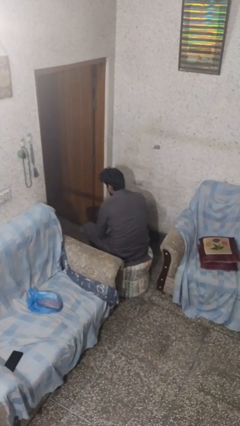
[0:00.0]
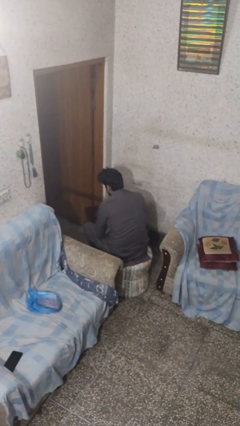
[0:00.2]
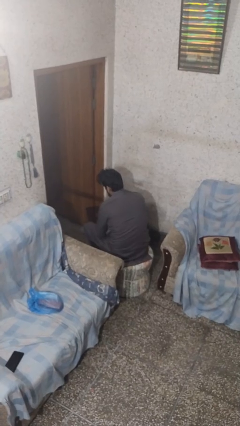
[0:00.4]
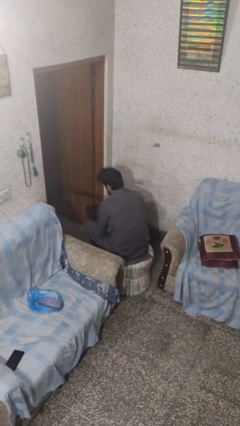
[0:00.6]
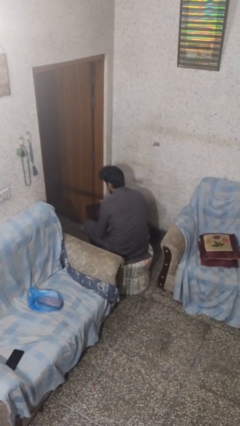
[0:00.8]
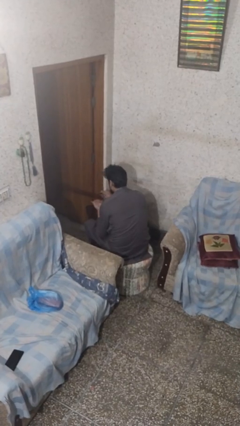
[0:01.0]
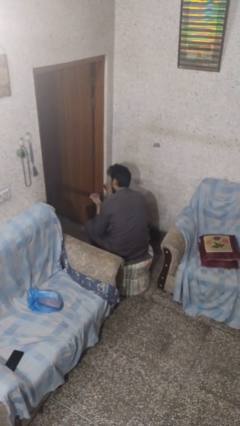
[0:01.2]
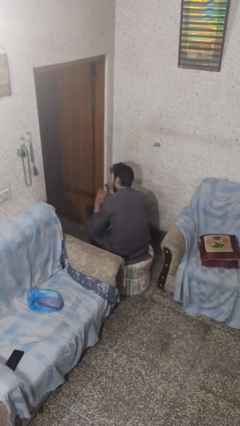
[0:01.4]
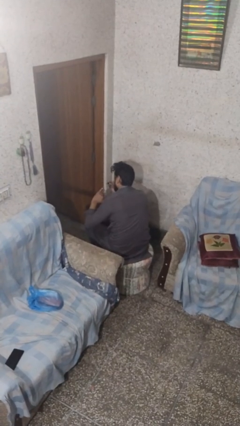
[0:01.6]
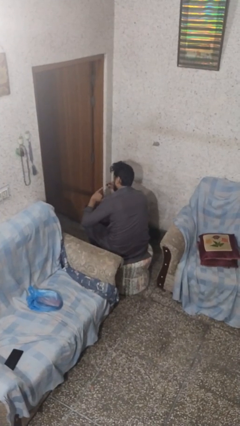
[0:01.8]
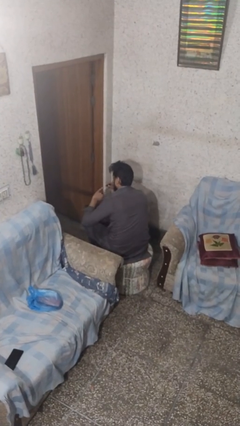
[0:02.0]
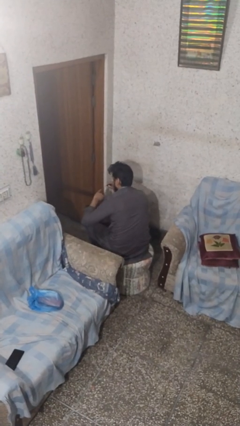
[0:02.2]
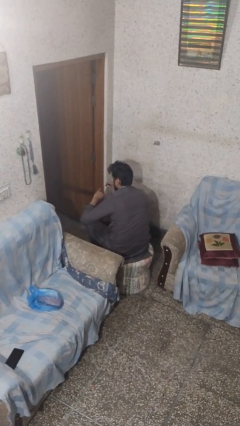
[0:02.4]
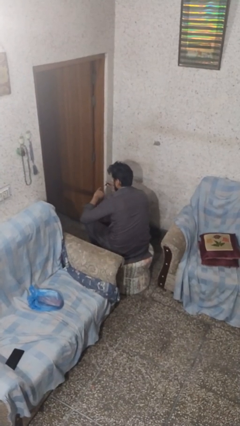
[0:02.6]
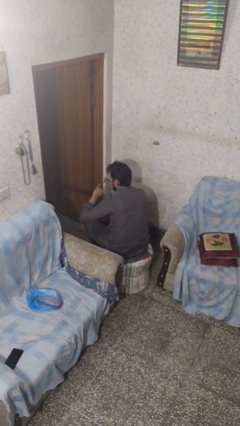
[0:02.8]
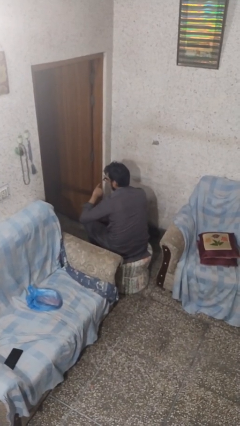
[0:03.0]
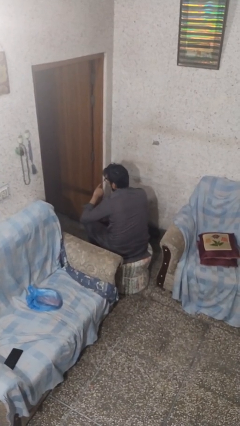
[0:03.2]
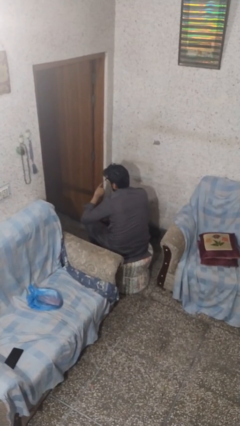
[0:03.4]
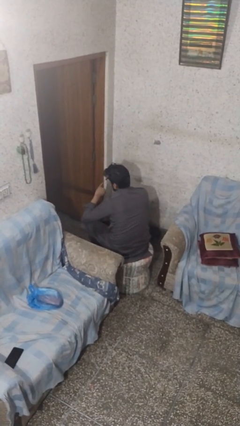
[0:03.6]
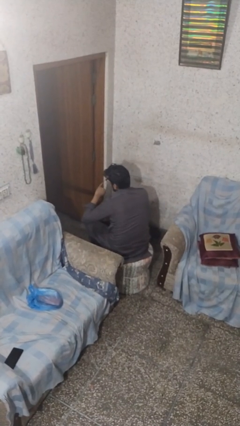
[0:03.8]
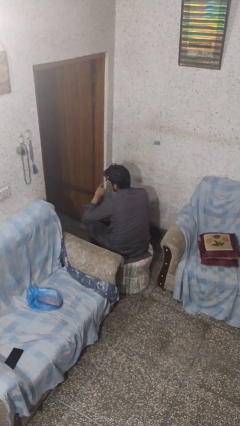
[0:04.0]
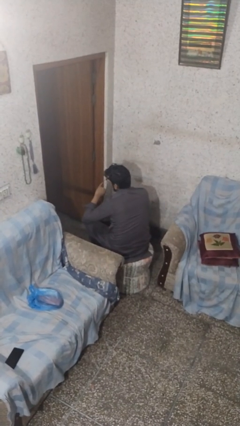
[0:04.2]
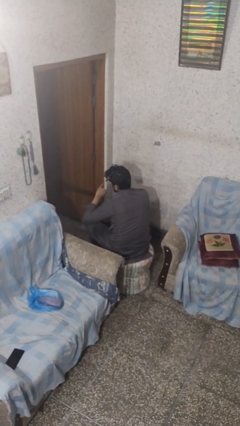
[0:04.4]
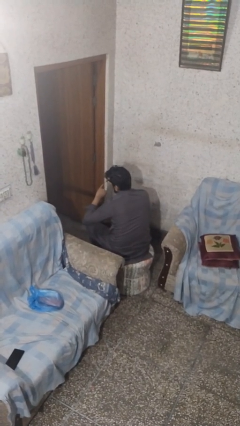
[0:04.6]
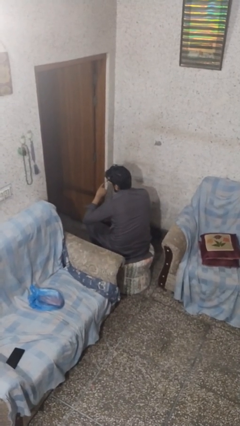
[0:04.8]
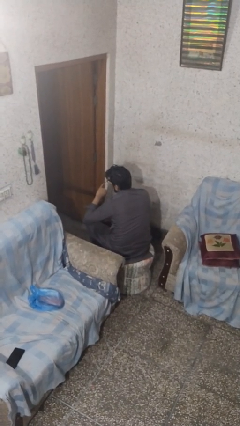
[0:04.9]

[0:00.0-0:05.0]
person paints fingernails

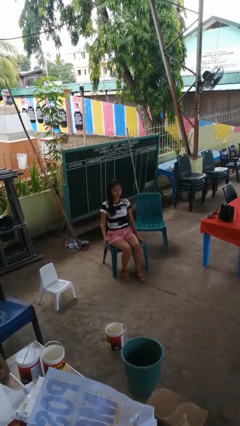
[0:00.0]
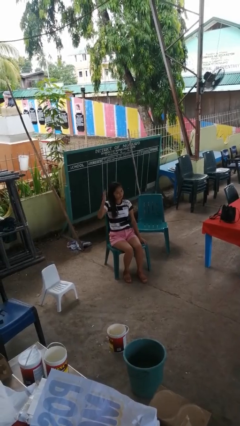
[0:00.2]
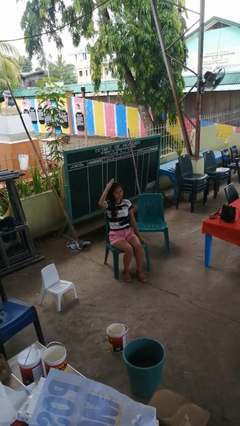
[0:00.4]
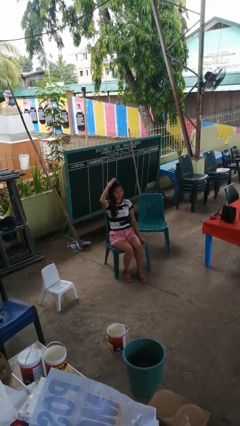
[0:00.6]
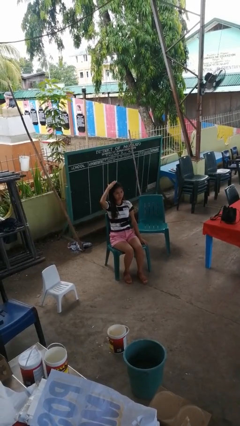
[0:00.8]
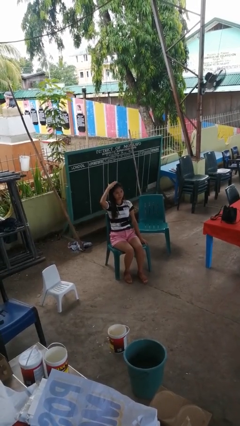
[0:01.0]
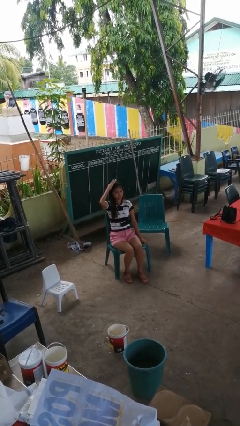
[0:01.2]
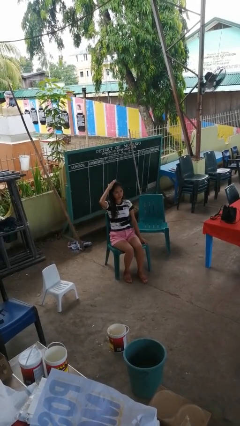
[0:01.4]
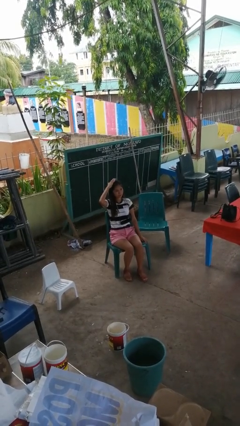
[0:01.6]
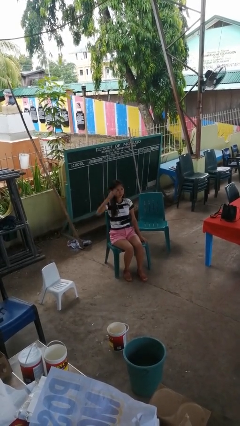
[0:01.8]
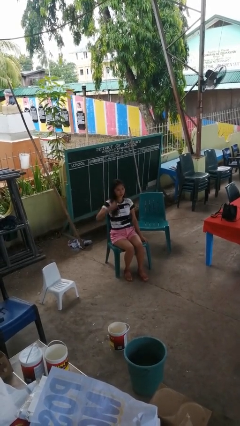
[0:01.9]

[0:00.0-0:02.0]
person pats head

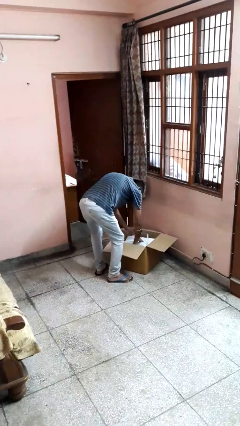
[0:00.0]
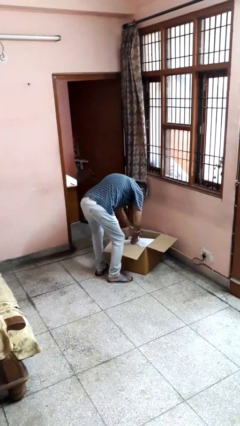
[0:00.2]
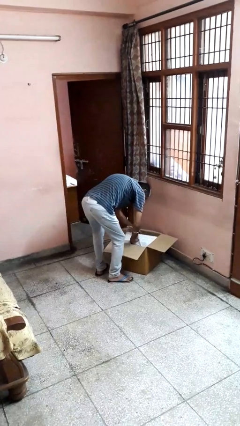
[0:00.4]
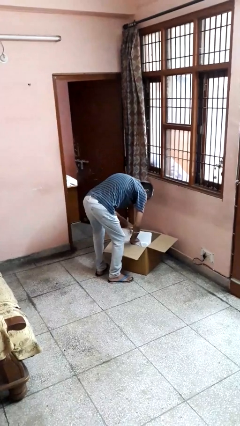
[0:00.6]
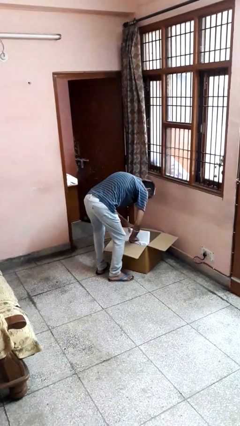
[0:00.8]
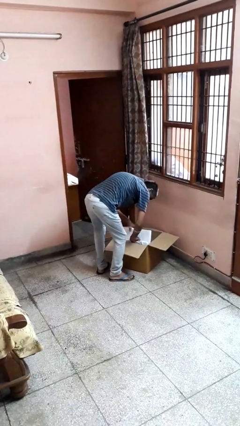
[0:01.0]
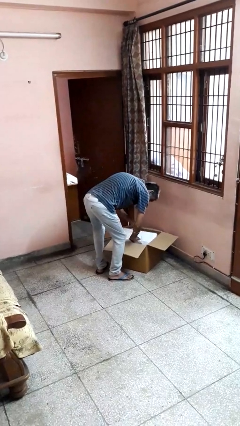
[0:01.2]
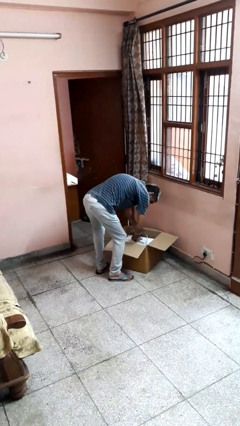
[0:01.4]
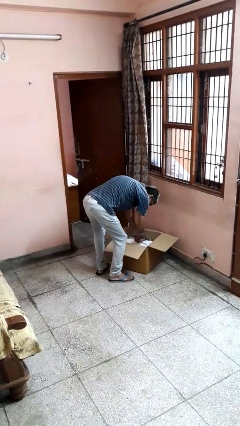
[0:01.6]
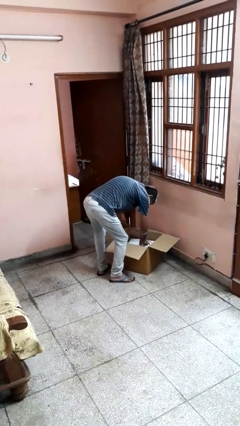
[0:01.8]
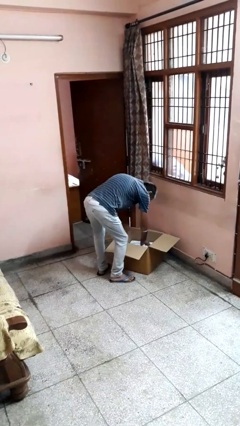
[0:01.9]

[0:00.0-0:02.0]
person searches in box

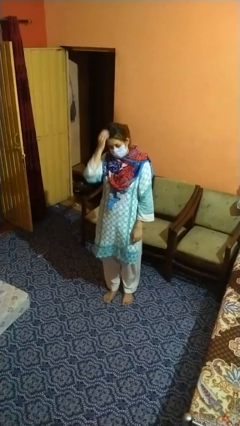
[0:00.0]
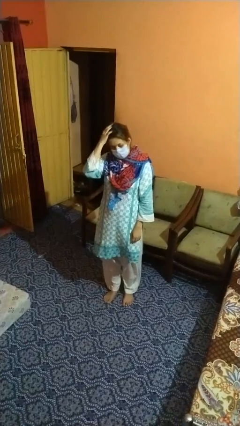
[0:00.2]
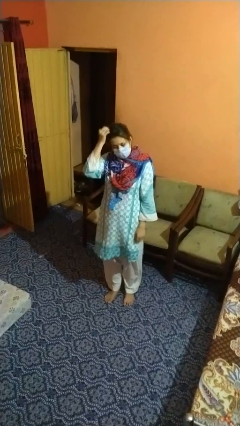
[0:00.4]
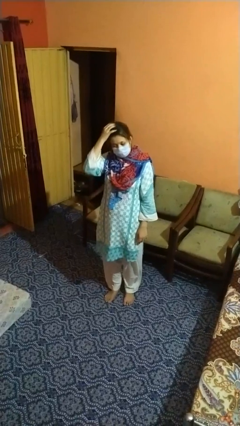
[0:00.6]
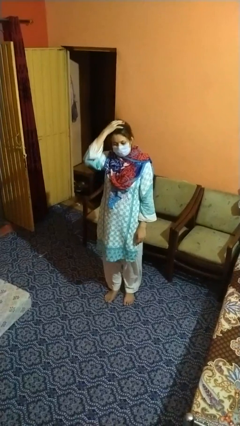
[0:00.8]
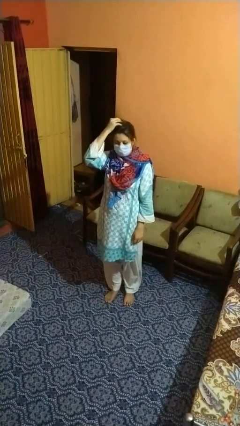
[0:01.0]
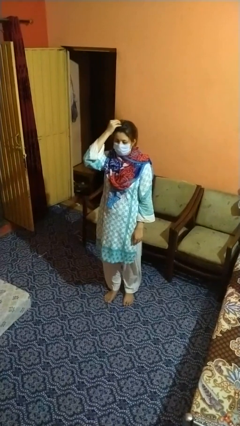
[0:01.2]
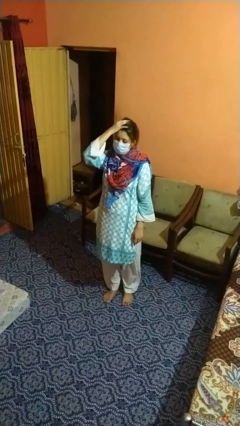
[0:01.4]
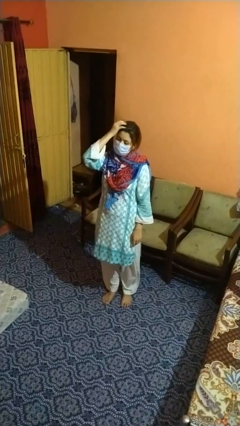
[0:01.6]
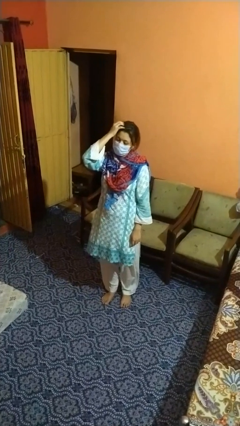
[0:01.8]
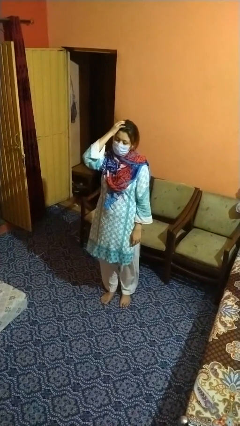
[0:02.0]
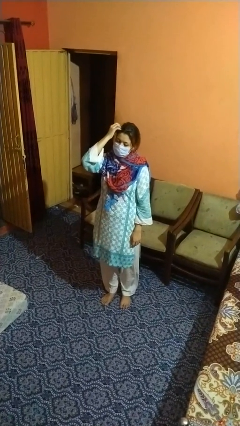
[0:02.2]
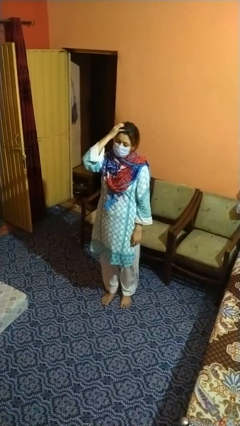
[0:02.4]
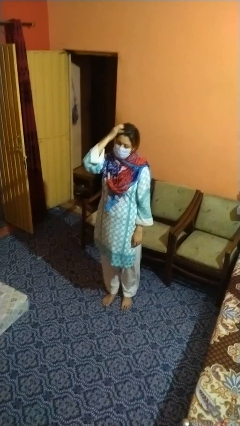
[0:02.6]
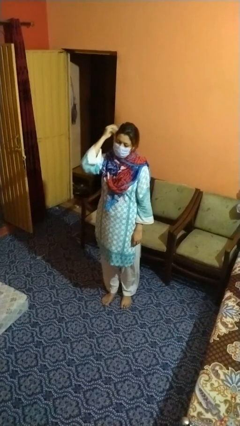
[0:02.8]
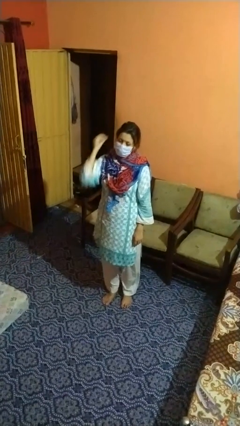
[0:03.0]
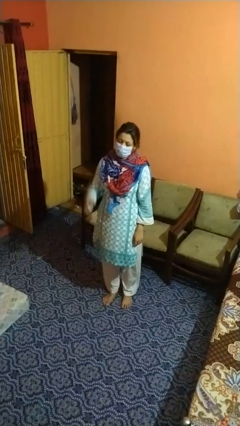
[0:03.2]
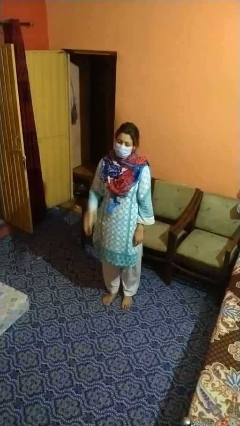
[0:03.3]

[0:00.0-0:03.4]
person strokes hair

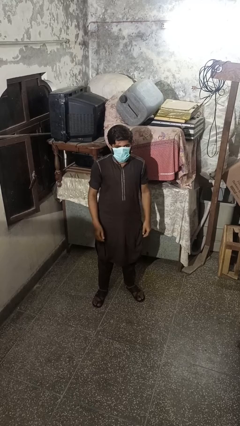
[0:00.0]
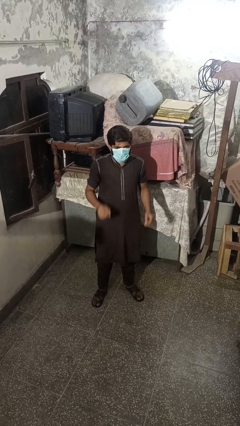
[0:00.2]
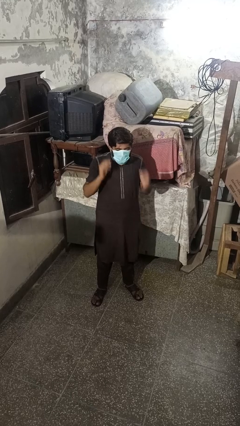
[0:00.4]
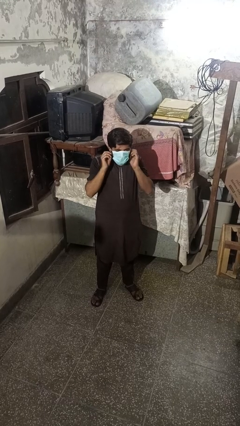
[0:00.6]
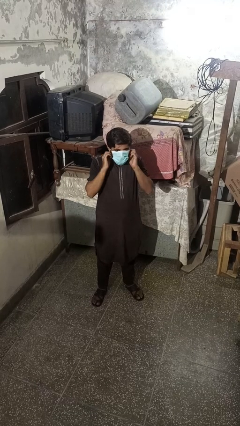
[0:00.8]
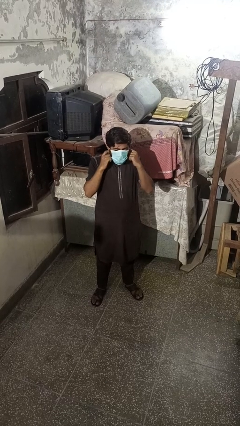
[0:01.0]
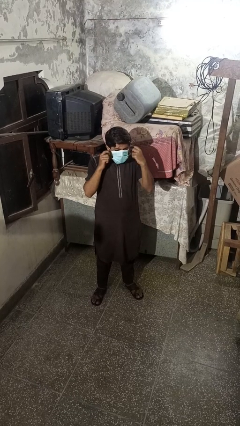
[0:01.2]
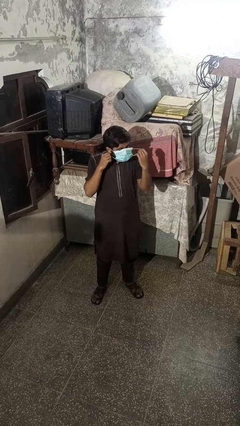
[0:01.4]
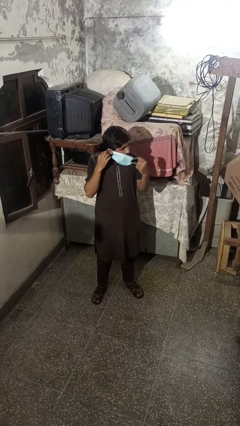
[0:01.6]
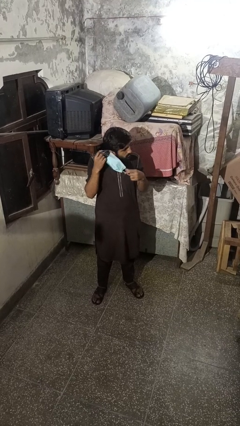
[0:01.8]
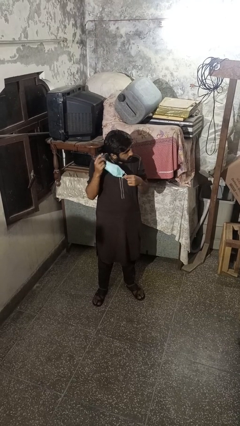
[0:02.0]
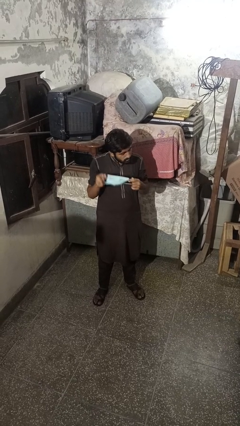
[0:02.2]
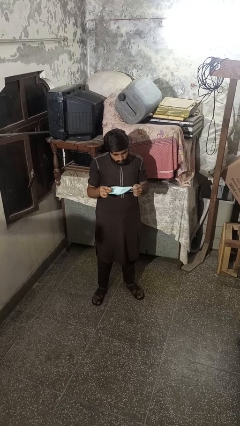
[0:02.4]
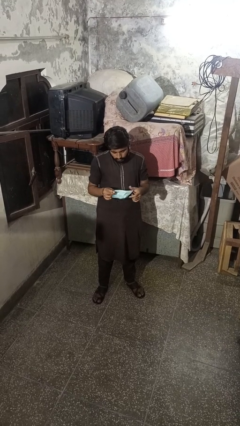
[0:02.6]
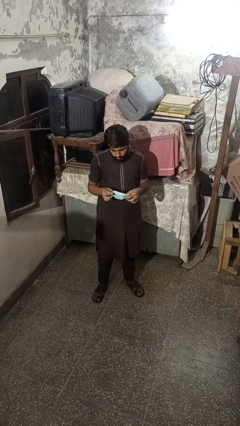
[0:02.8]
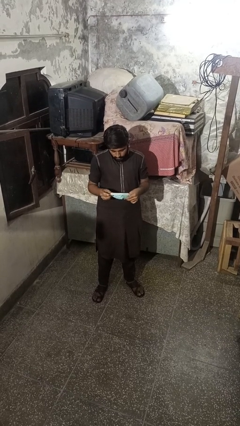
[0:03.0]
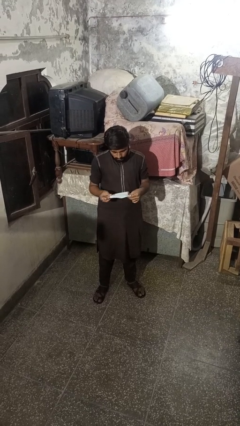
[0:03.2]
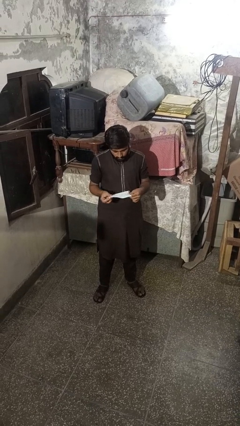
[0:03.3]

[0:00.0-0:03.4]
person takes off facemask

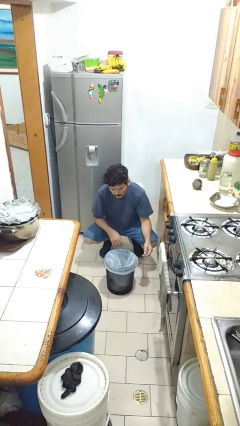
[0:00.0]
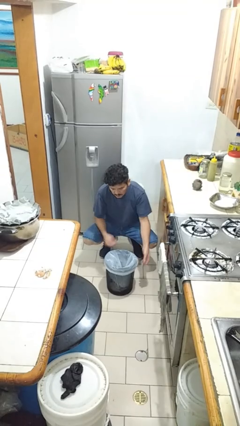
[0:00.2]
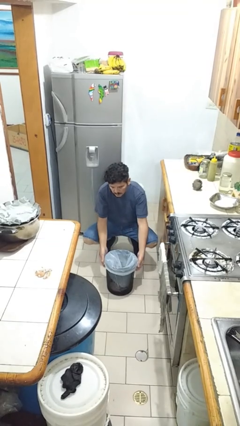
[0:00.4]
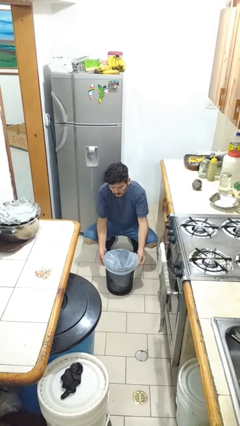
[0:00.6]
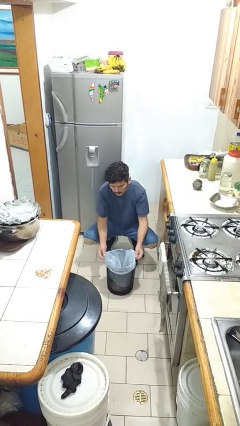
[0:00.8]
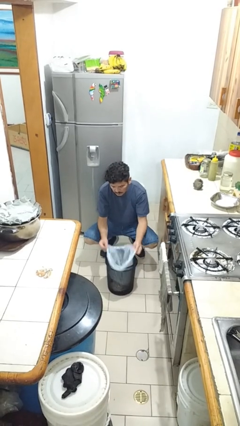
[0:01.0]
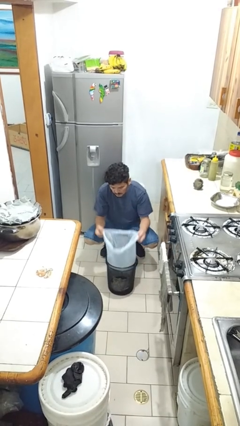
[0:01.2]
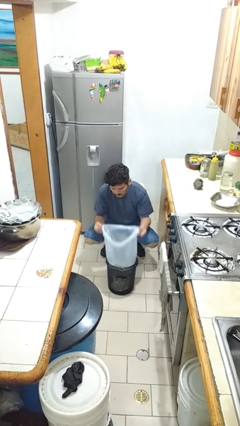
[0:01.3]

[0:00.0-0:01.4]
person removes trashbag from trashcan

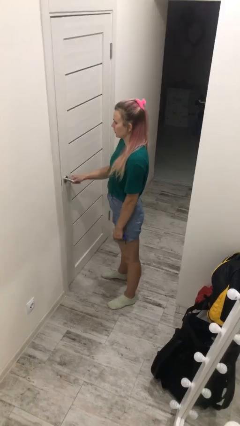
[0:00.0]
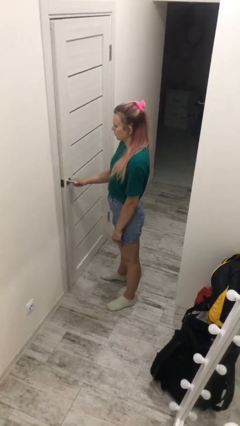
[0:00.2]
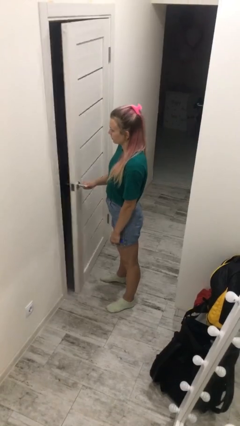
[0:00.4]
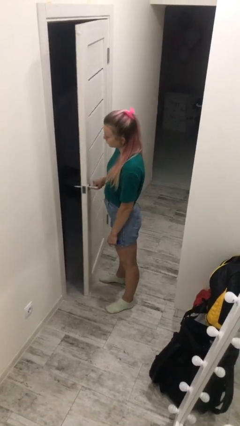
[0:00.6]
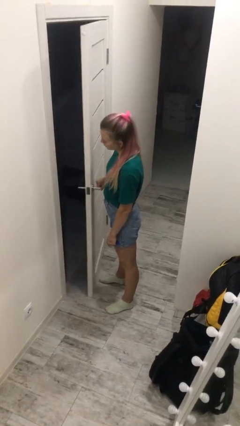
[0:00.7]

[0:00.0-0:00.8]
person opens facility door
